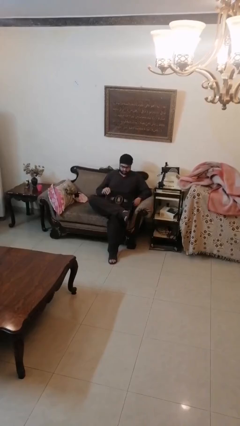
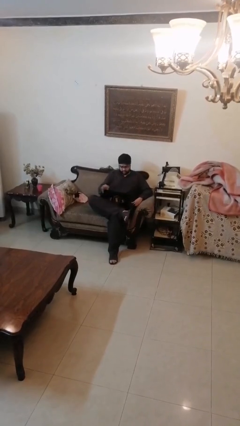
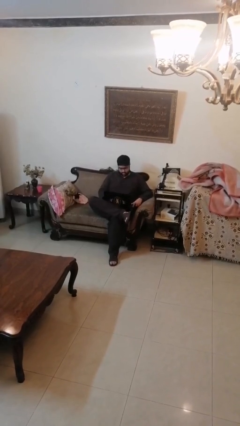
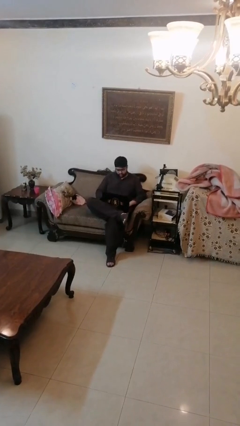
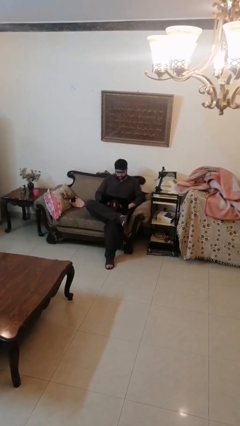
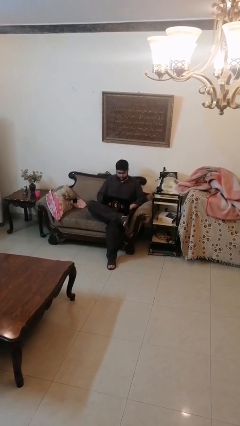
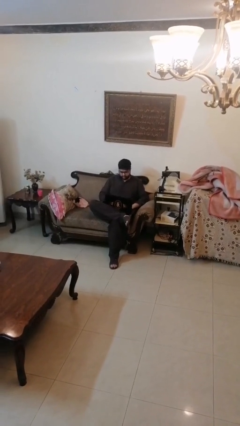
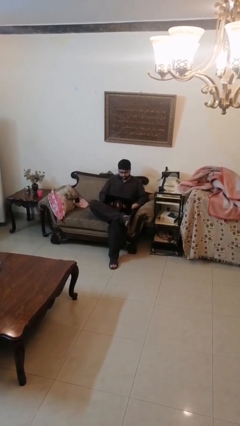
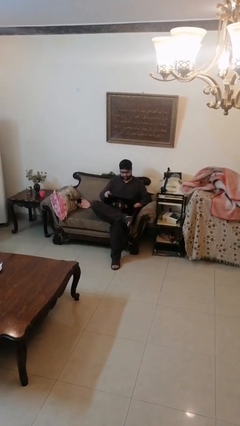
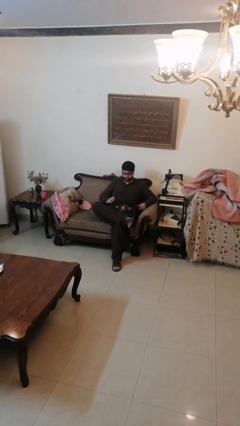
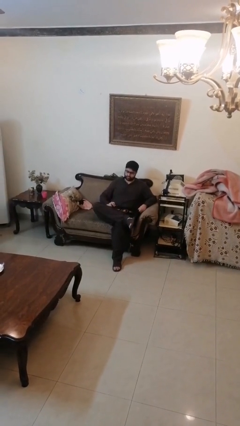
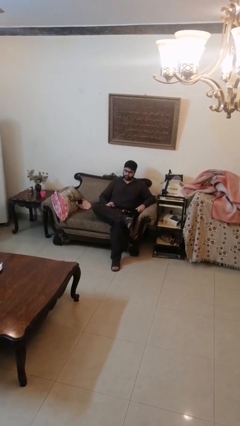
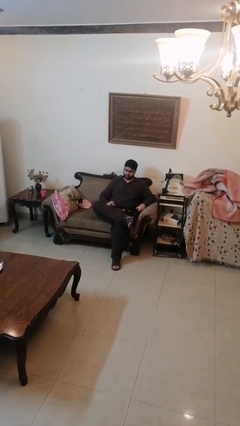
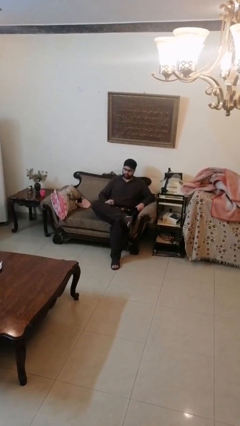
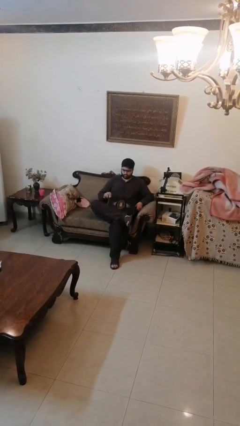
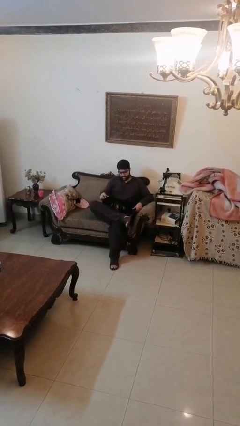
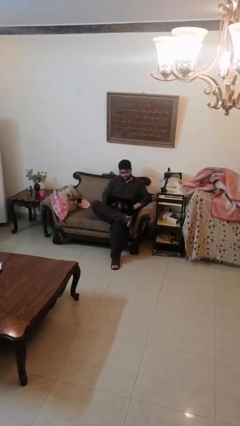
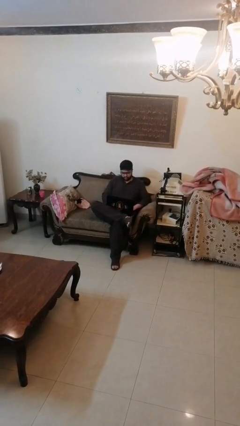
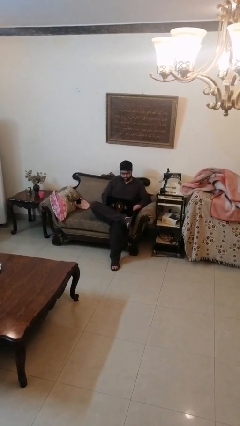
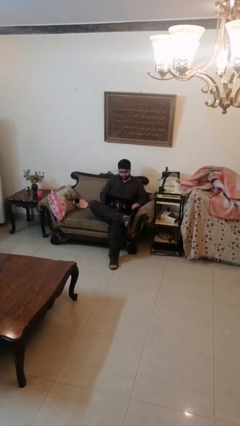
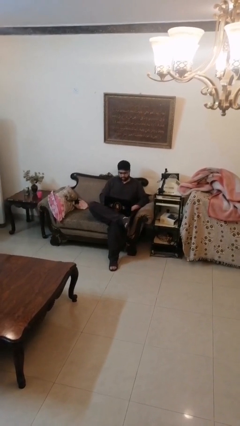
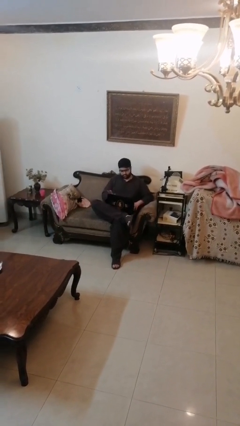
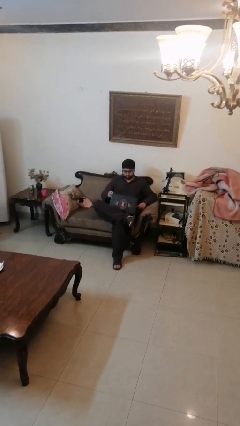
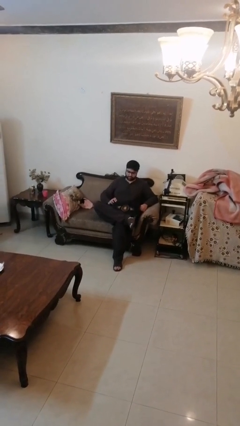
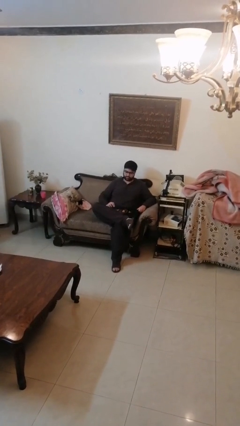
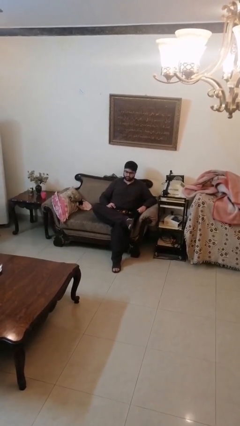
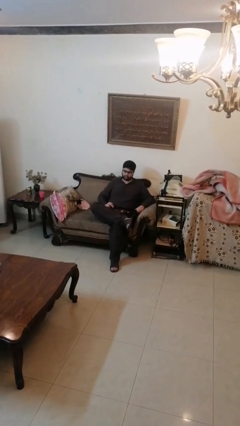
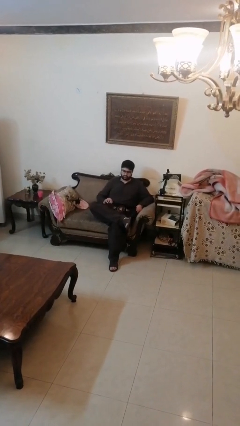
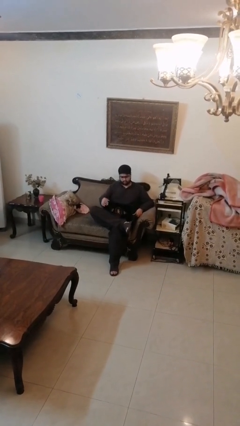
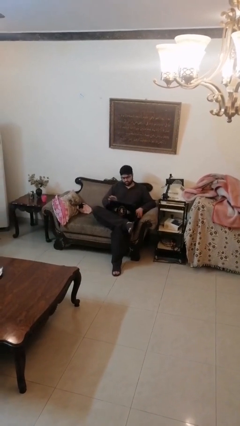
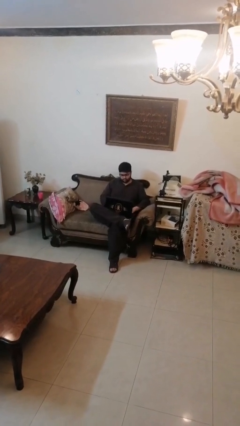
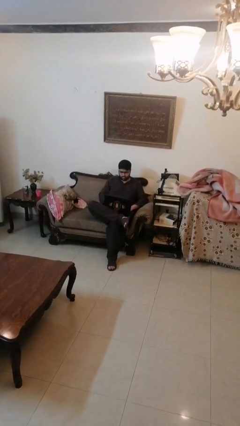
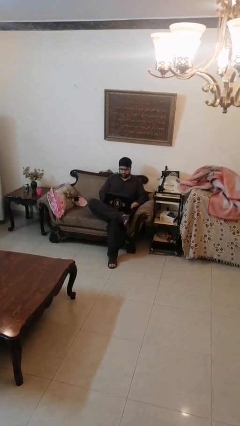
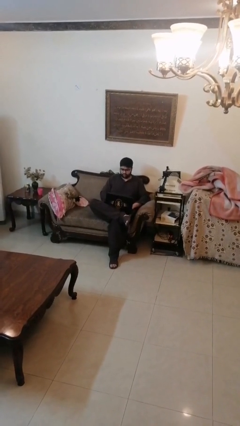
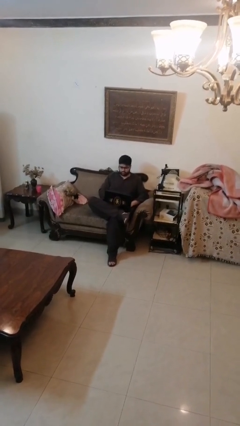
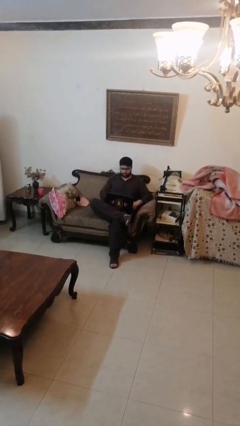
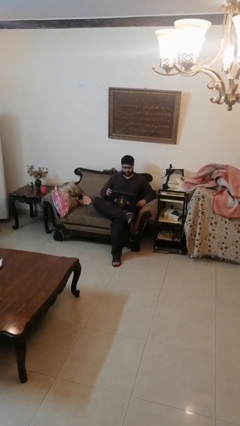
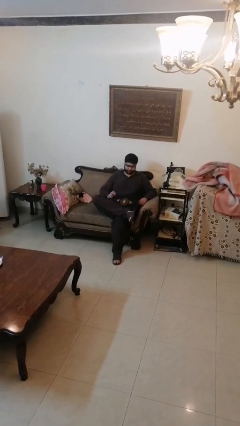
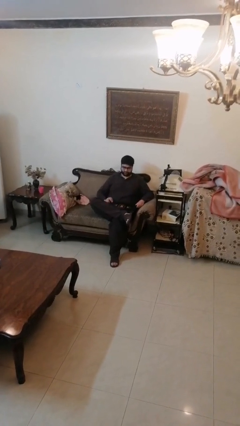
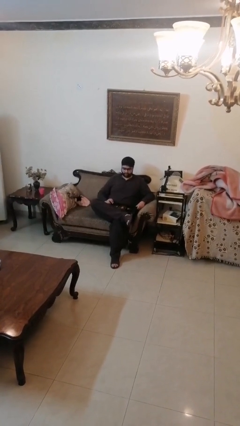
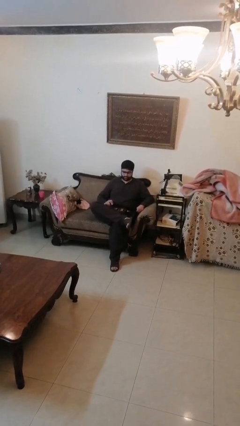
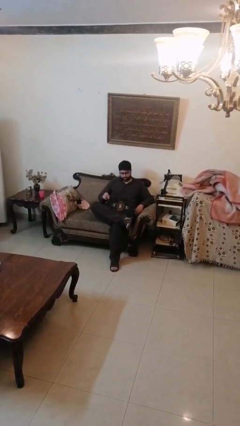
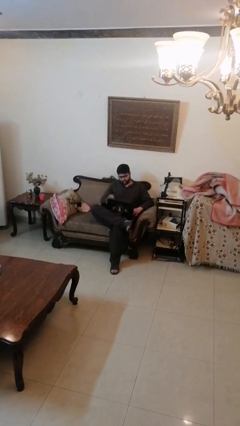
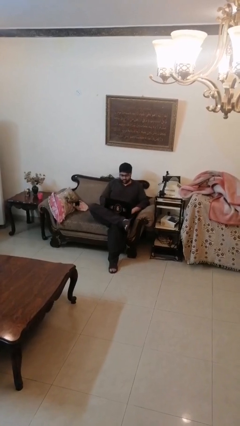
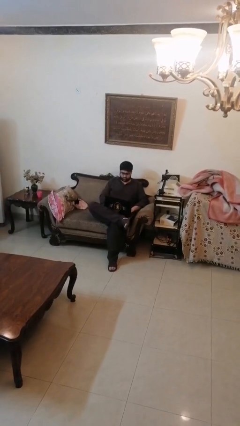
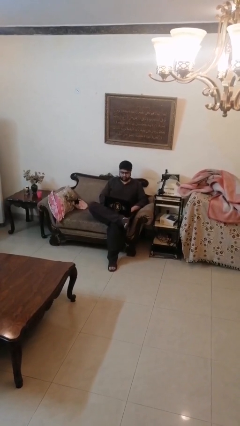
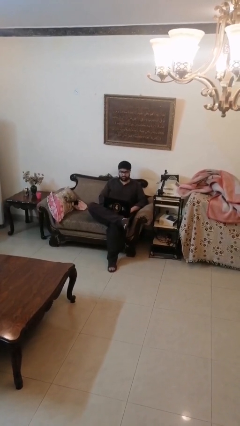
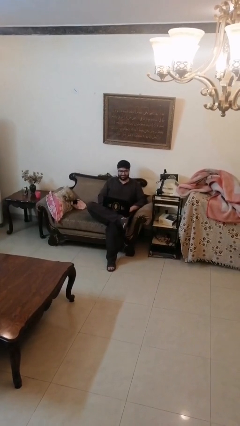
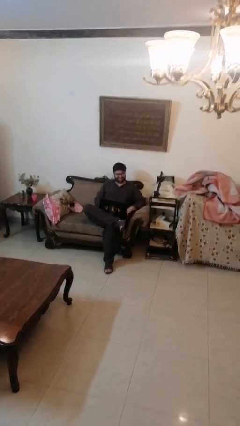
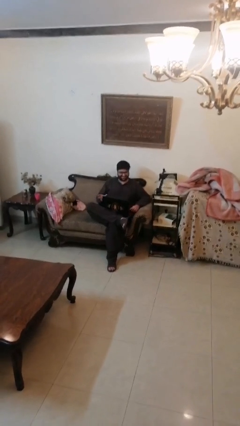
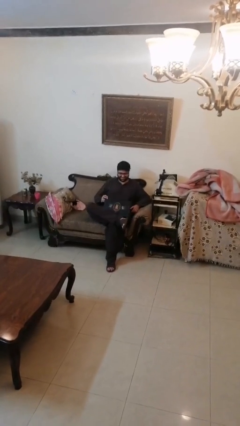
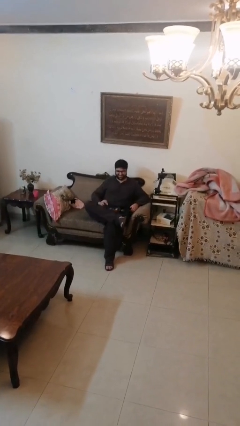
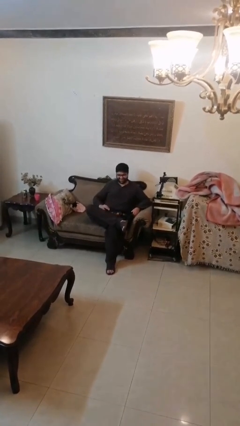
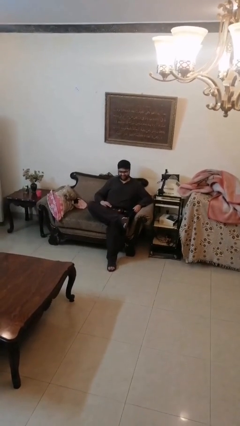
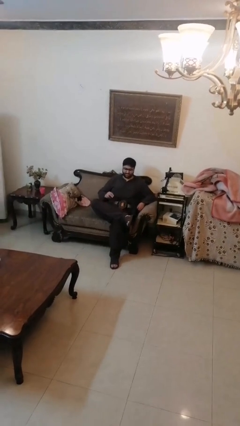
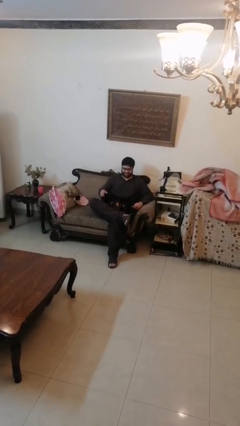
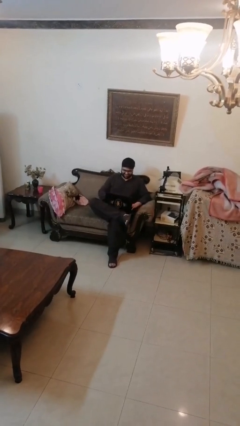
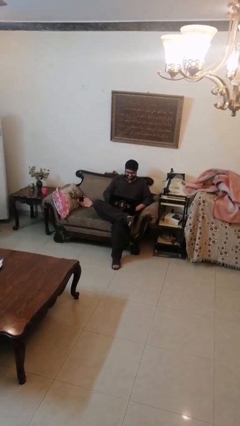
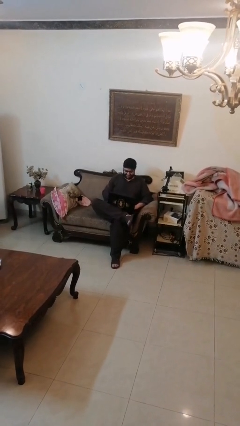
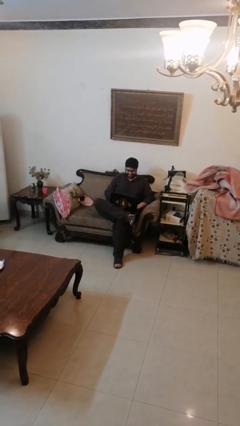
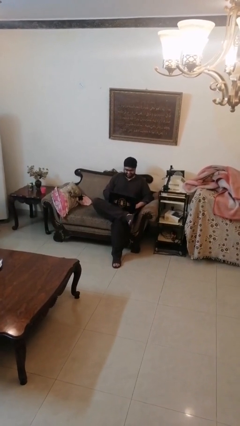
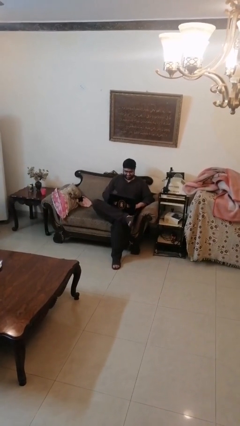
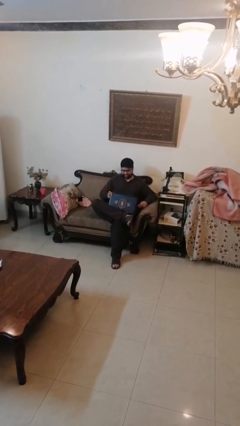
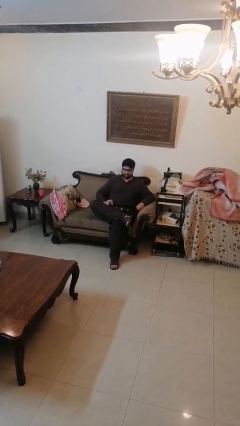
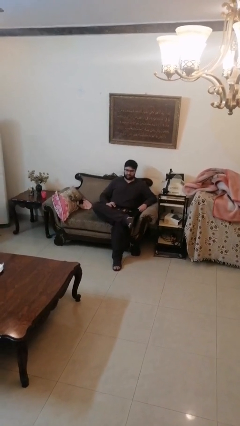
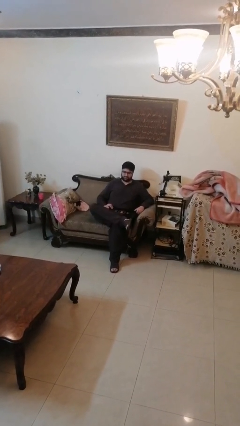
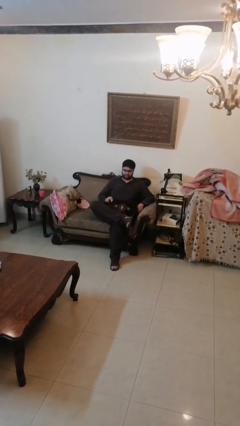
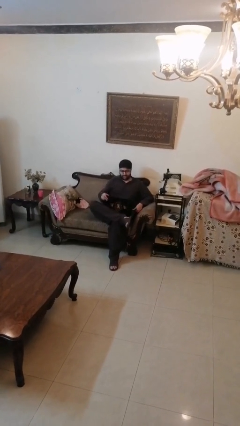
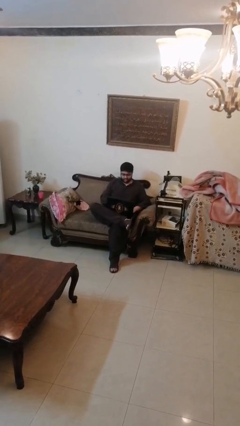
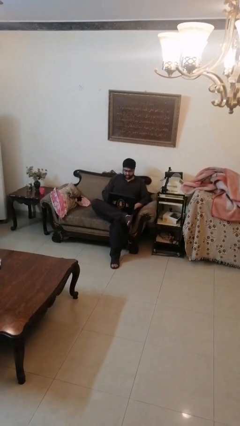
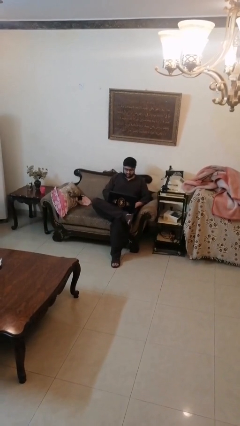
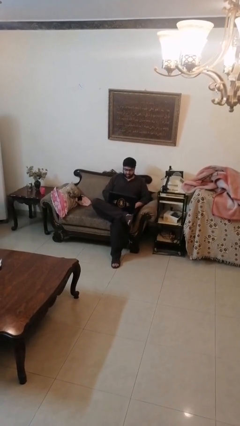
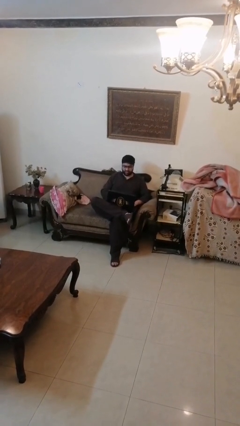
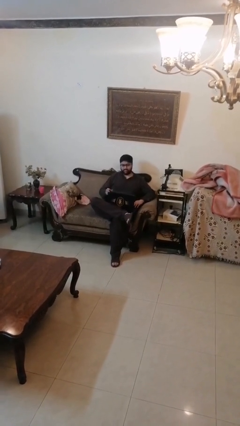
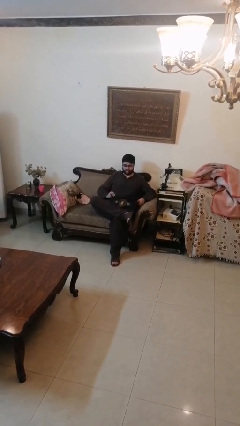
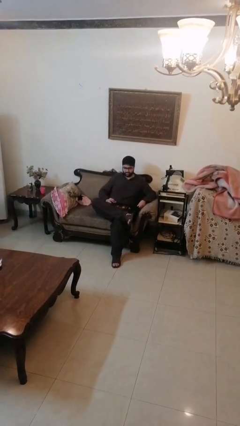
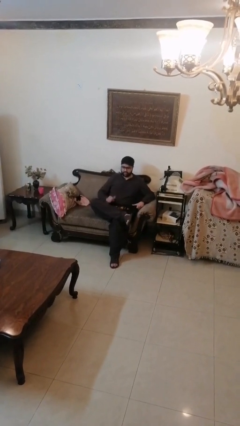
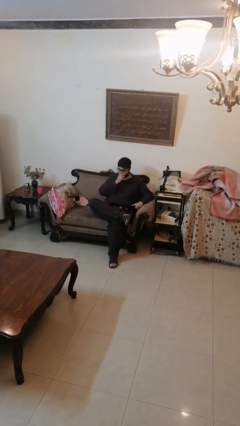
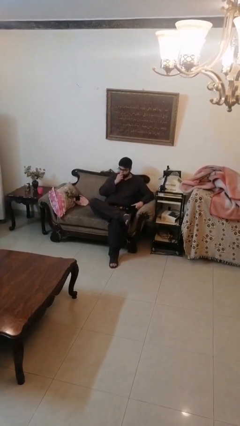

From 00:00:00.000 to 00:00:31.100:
person interacts with laptop

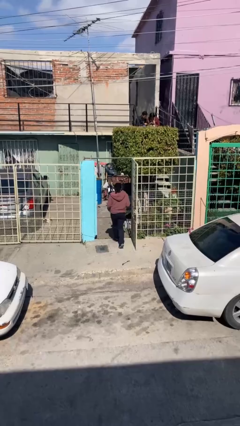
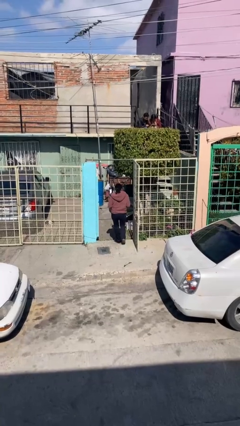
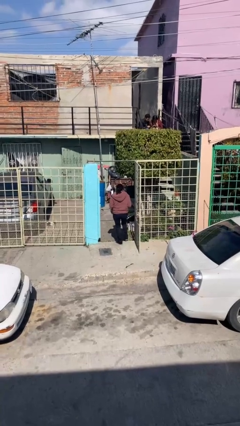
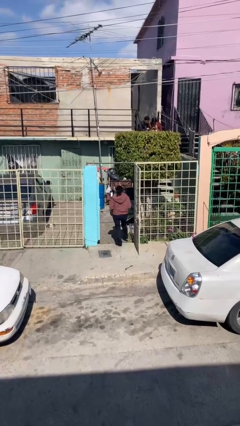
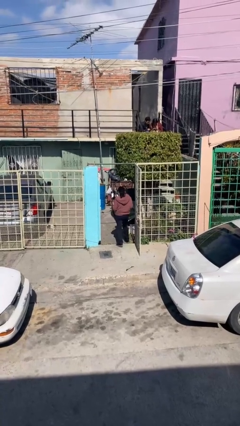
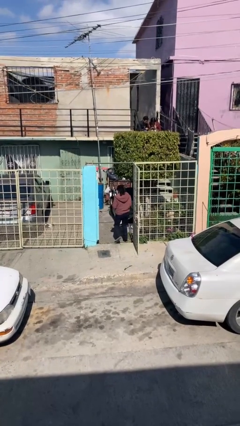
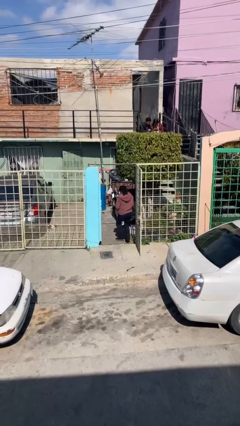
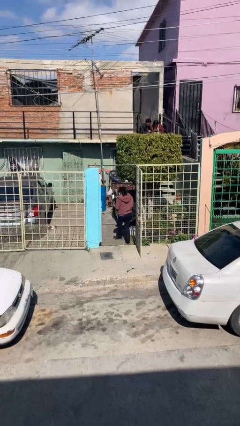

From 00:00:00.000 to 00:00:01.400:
person exits scene through structure

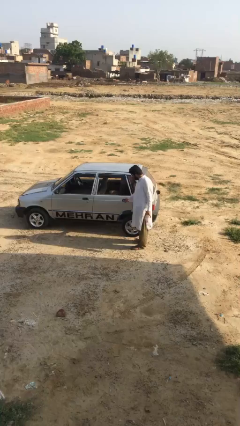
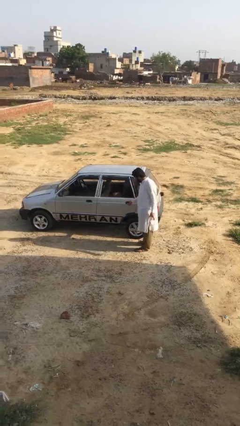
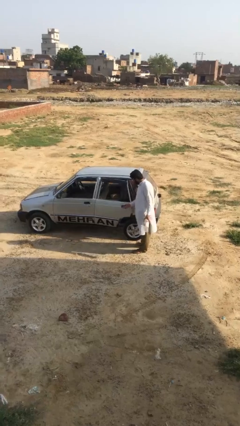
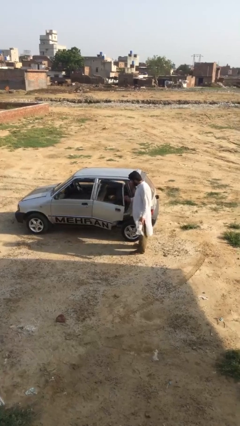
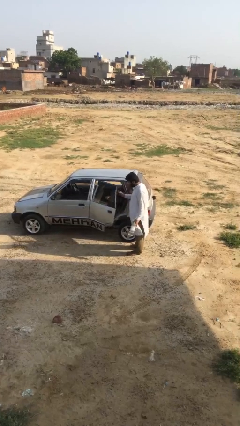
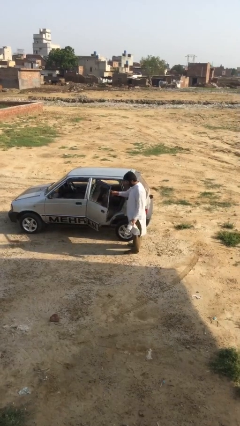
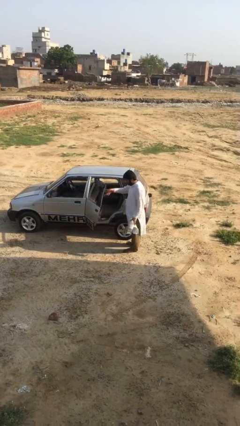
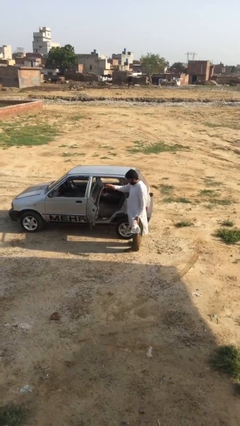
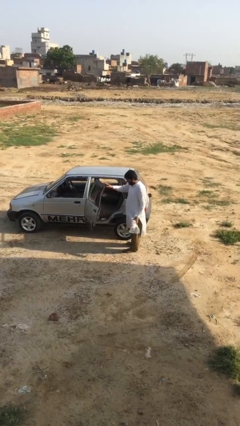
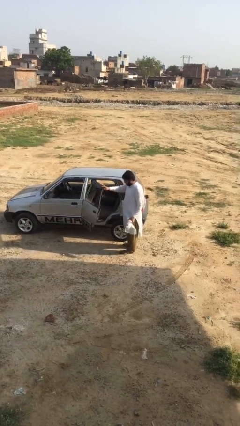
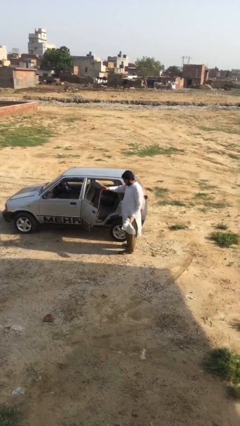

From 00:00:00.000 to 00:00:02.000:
person opens car door
